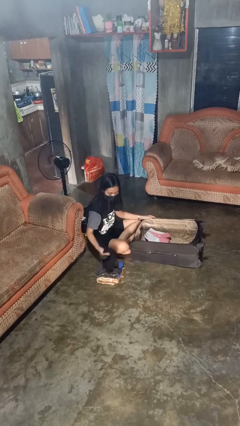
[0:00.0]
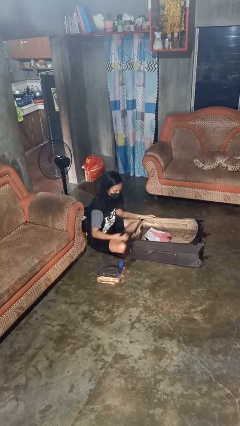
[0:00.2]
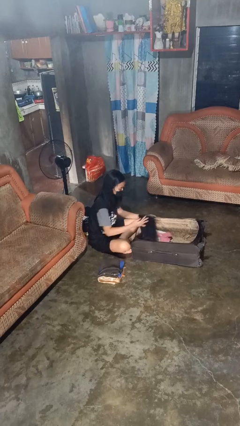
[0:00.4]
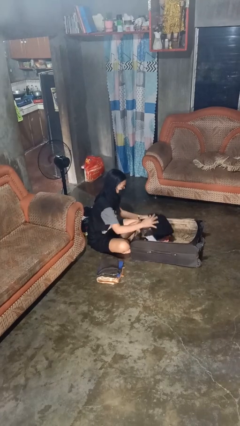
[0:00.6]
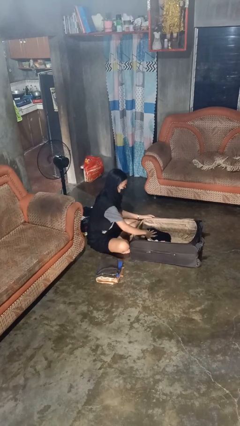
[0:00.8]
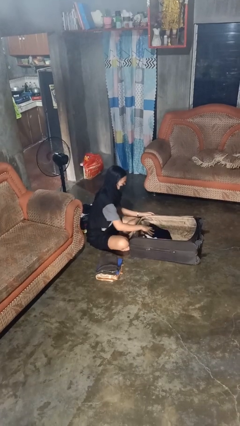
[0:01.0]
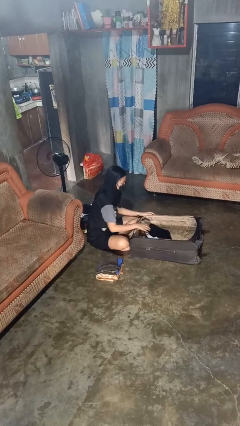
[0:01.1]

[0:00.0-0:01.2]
person loads clothes into suitcase

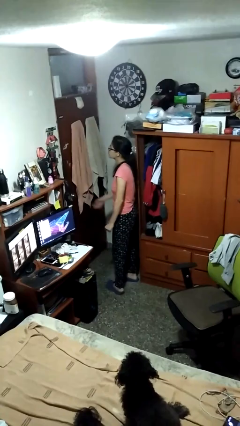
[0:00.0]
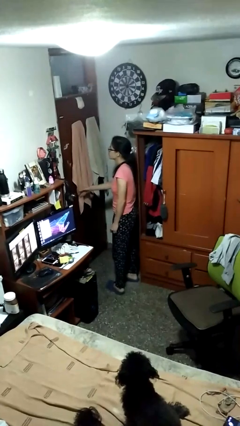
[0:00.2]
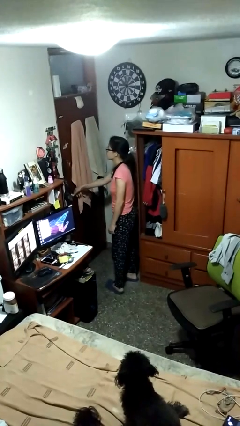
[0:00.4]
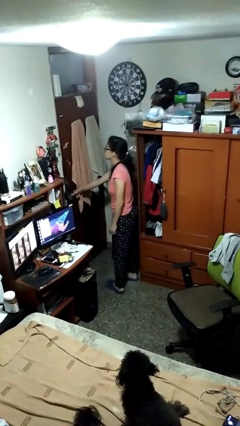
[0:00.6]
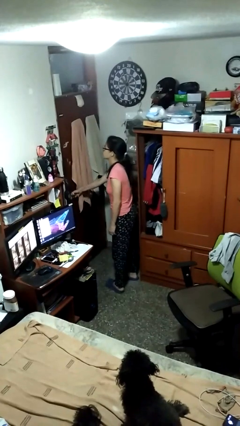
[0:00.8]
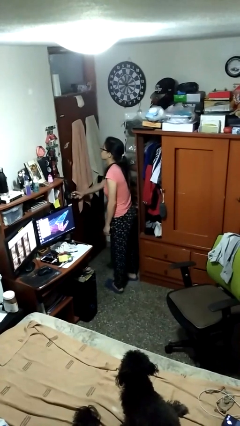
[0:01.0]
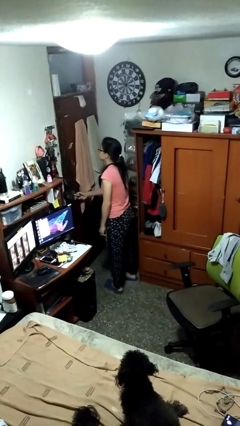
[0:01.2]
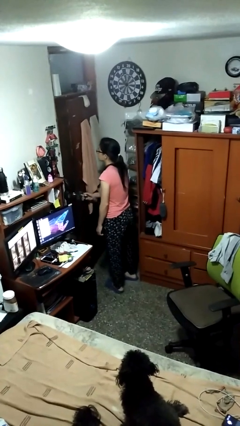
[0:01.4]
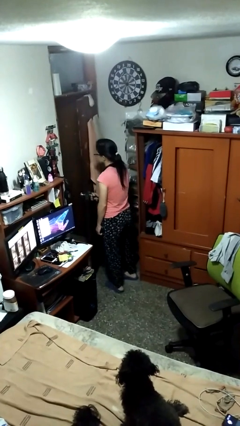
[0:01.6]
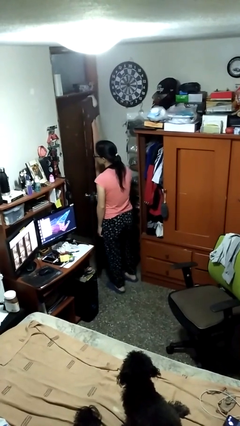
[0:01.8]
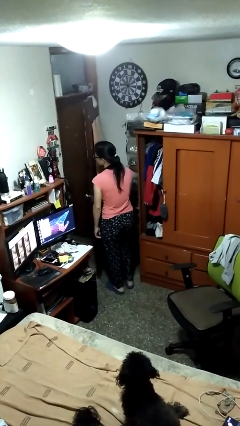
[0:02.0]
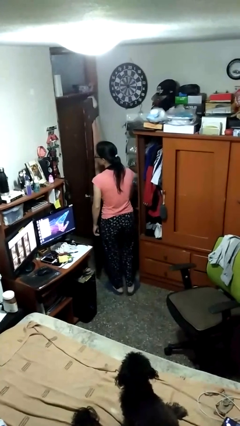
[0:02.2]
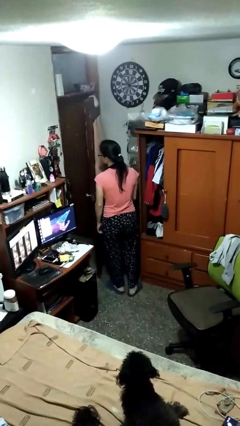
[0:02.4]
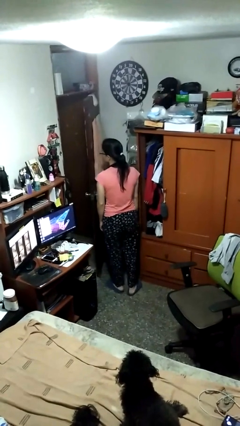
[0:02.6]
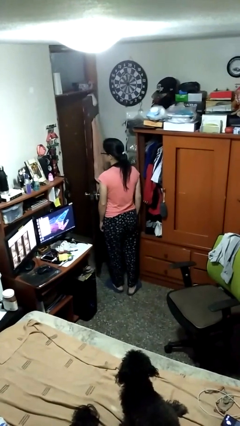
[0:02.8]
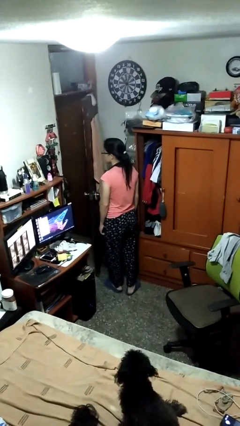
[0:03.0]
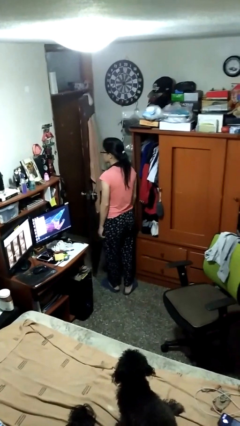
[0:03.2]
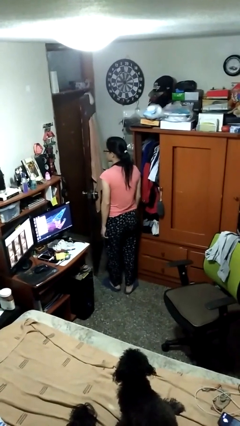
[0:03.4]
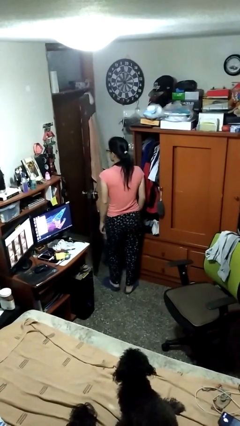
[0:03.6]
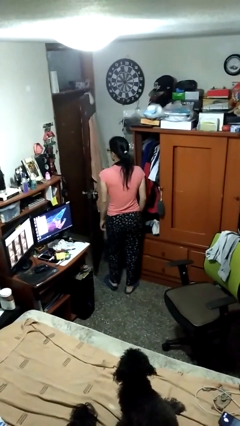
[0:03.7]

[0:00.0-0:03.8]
person opens facility door

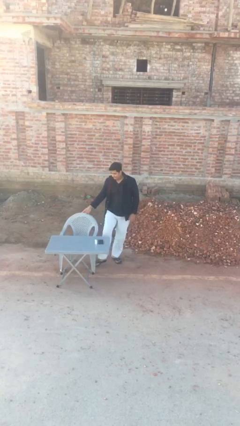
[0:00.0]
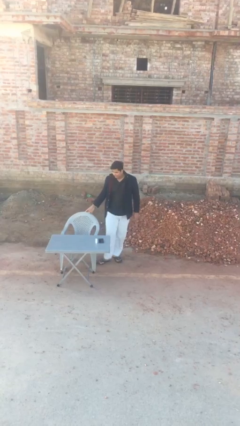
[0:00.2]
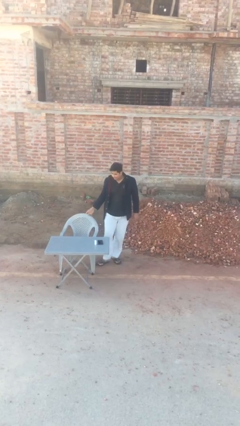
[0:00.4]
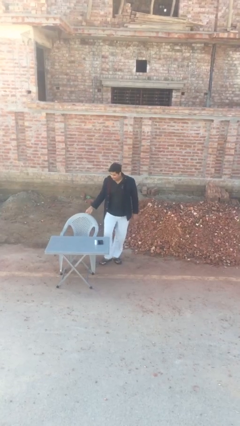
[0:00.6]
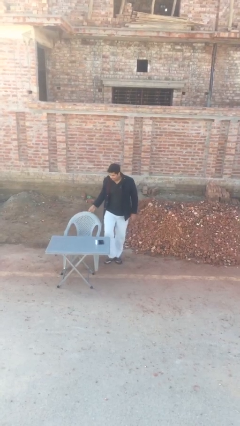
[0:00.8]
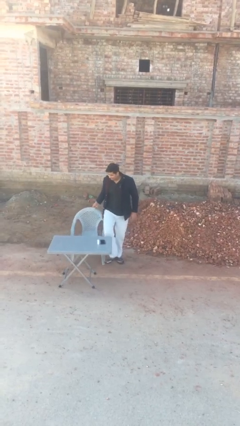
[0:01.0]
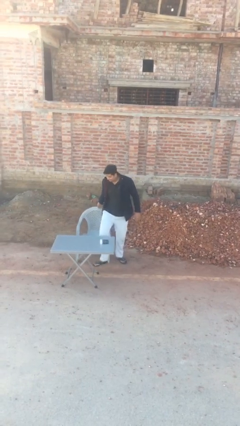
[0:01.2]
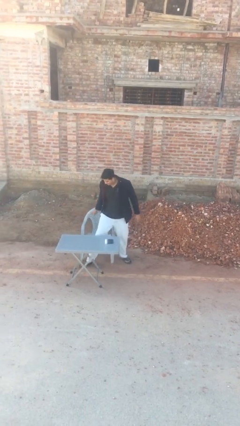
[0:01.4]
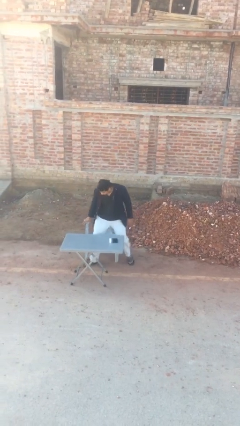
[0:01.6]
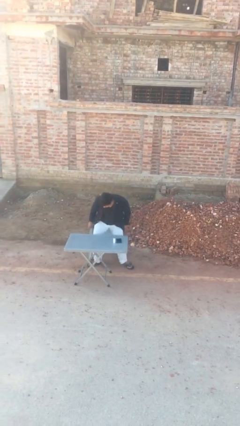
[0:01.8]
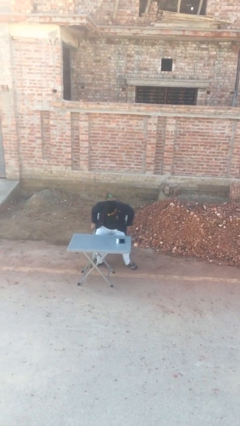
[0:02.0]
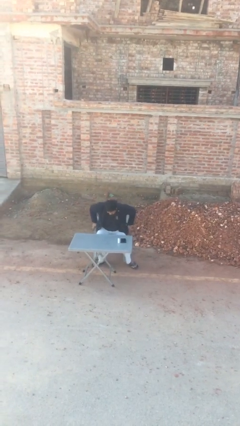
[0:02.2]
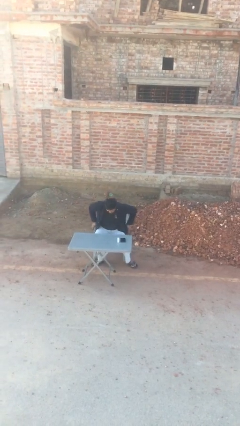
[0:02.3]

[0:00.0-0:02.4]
person sits down

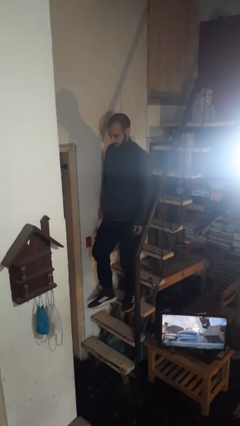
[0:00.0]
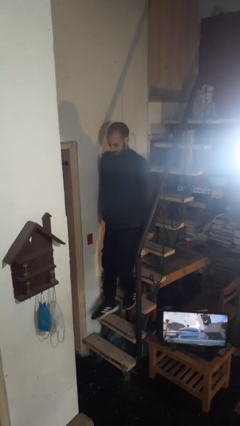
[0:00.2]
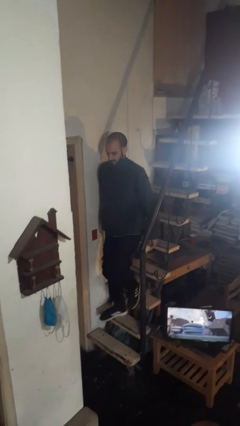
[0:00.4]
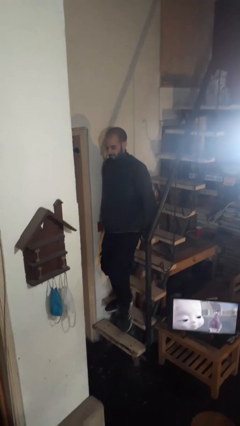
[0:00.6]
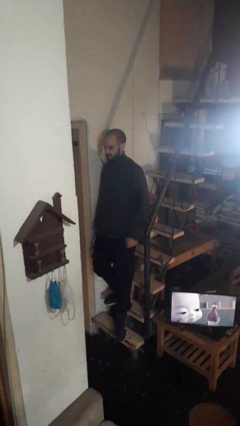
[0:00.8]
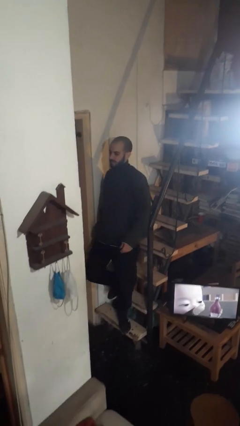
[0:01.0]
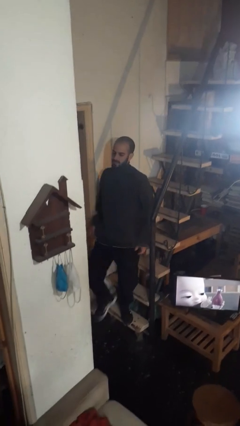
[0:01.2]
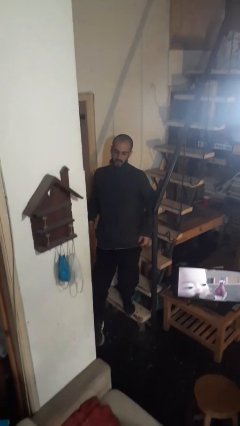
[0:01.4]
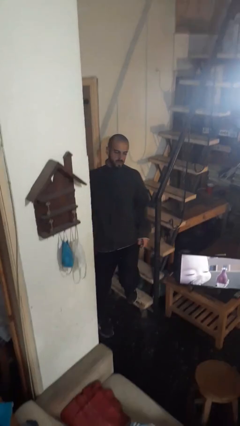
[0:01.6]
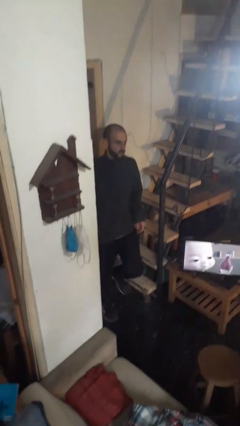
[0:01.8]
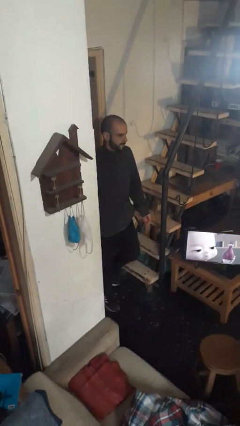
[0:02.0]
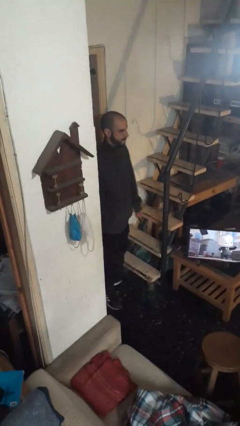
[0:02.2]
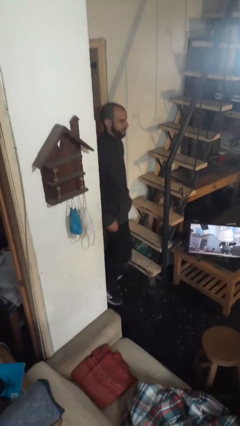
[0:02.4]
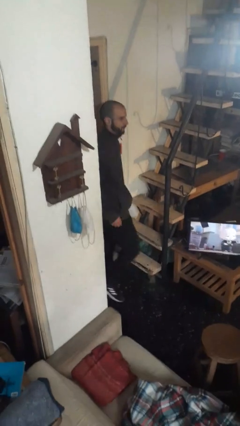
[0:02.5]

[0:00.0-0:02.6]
person climbs down stairs

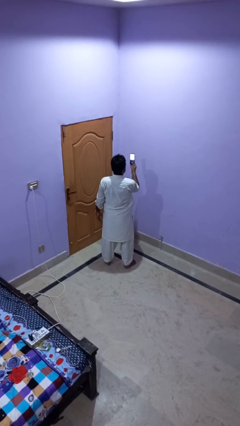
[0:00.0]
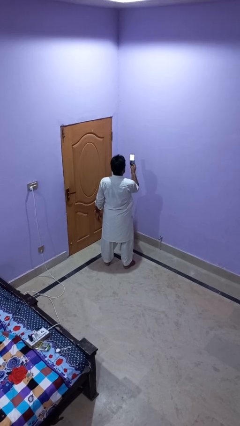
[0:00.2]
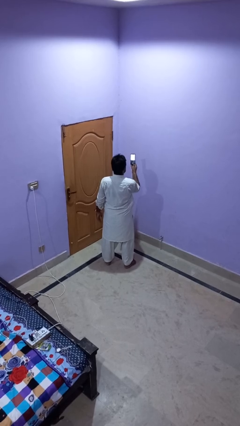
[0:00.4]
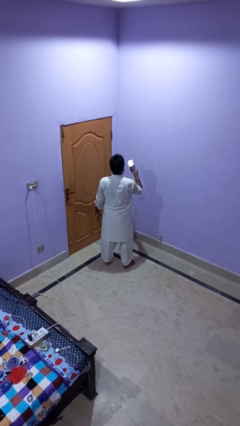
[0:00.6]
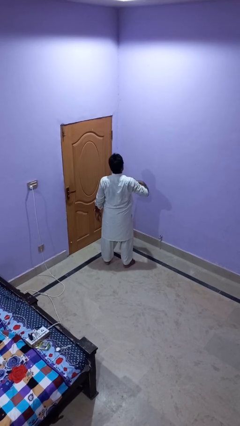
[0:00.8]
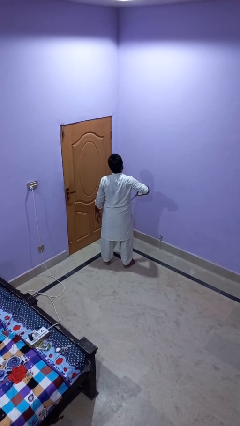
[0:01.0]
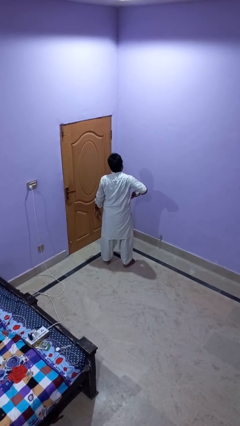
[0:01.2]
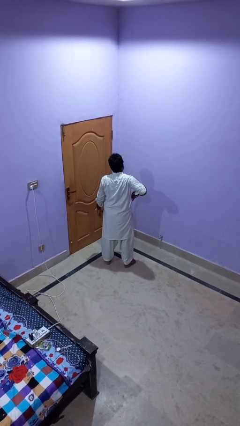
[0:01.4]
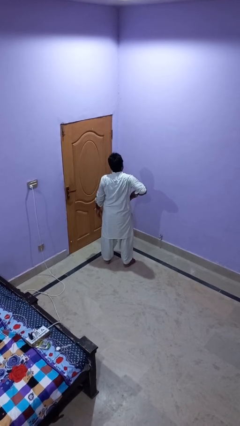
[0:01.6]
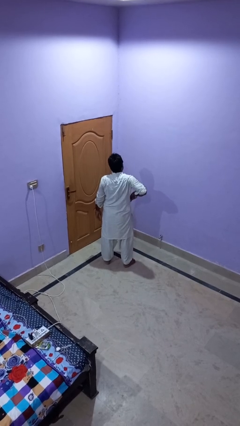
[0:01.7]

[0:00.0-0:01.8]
person puts phone into pocket

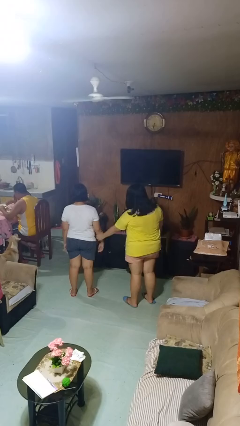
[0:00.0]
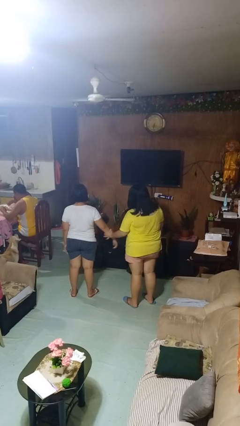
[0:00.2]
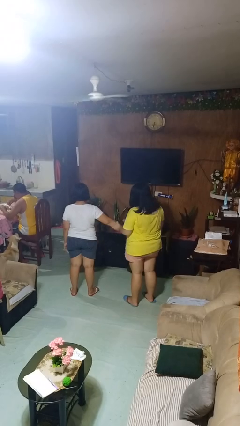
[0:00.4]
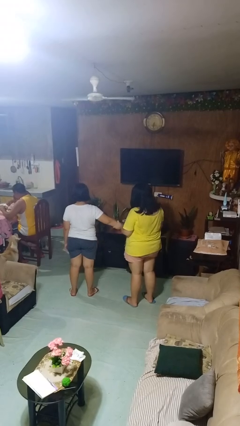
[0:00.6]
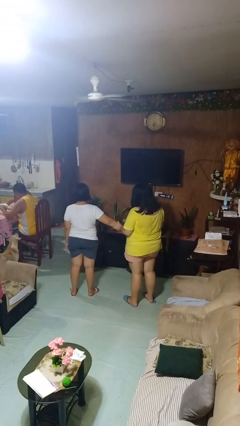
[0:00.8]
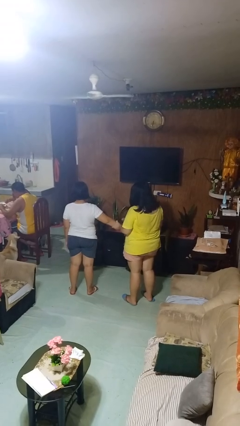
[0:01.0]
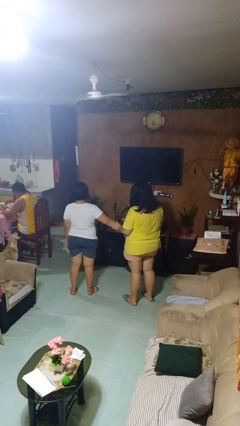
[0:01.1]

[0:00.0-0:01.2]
person grabs person by forearm

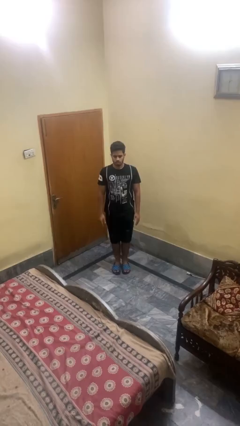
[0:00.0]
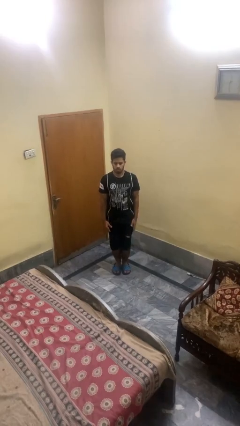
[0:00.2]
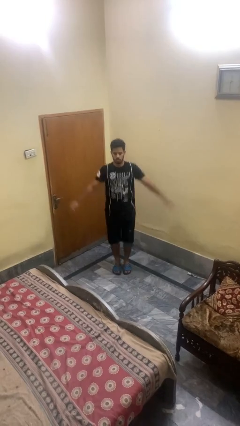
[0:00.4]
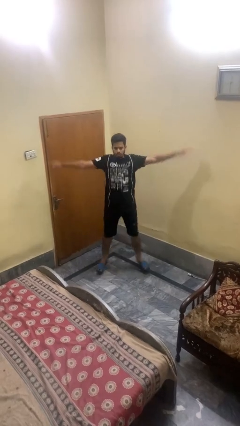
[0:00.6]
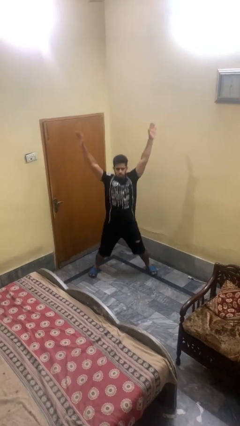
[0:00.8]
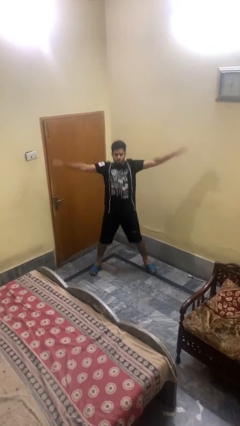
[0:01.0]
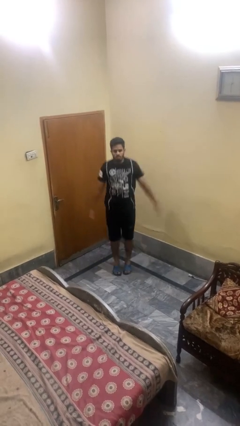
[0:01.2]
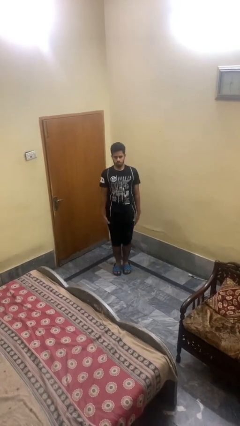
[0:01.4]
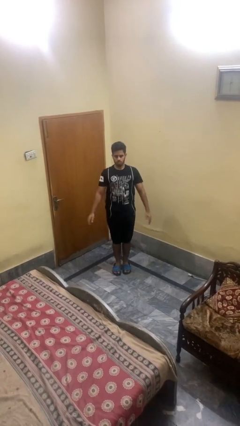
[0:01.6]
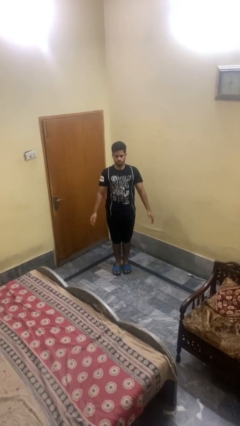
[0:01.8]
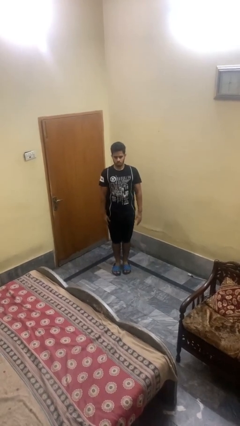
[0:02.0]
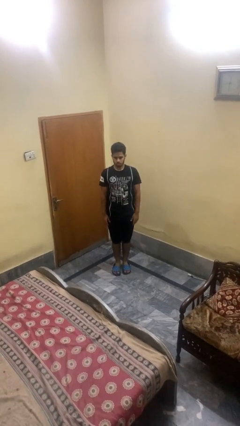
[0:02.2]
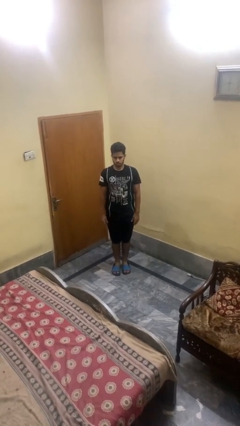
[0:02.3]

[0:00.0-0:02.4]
person exercises with jumping jacks

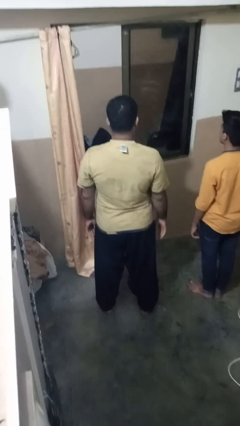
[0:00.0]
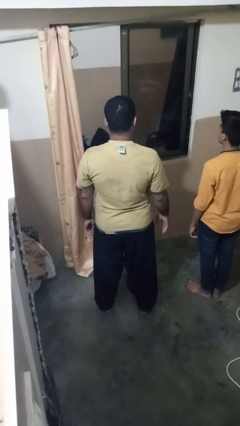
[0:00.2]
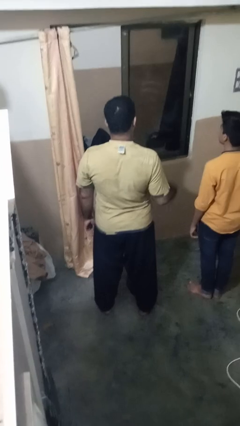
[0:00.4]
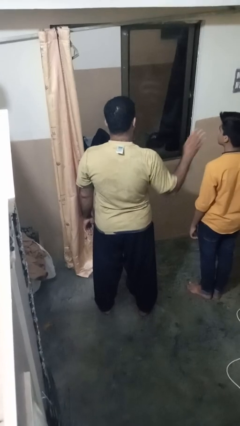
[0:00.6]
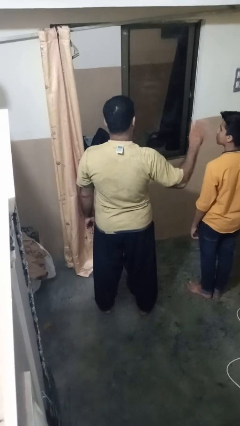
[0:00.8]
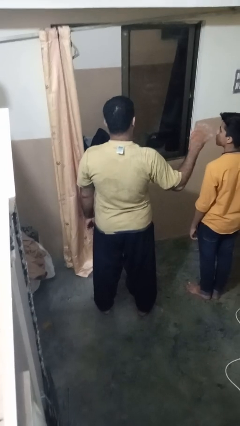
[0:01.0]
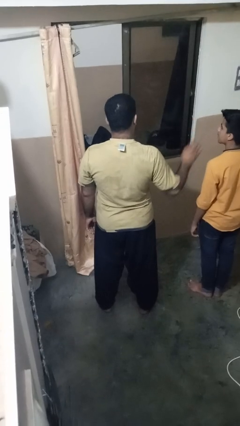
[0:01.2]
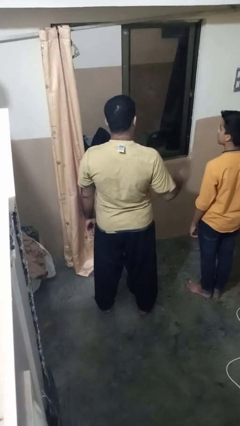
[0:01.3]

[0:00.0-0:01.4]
person waves at person
